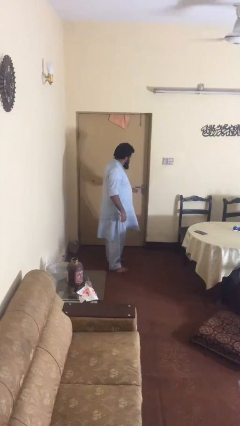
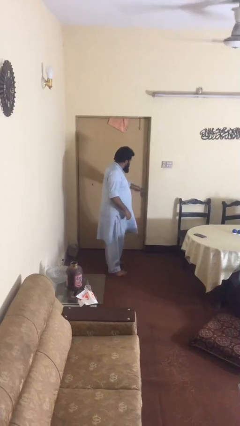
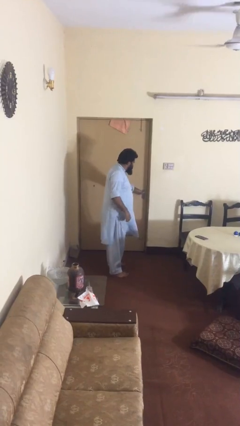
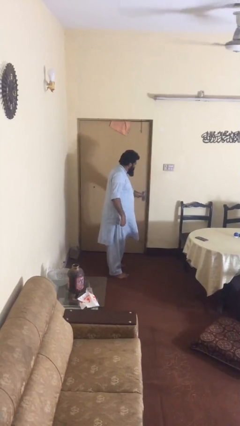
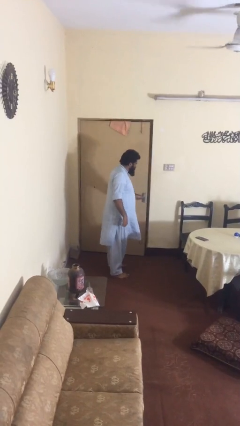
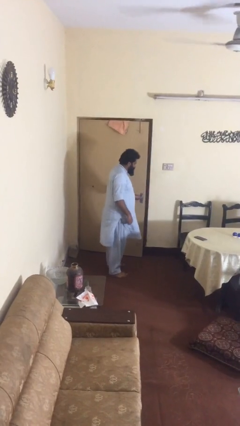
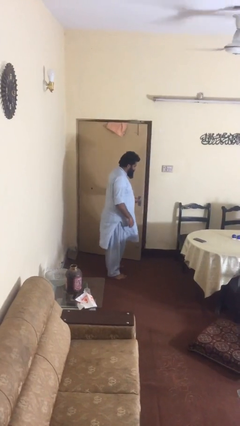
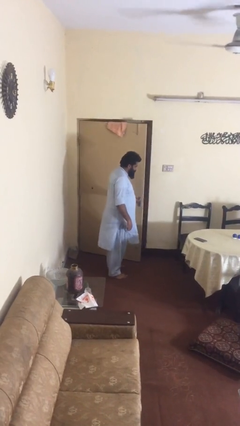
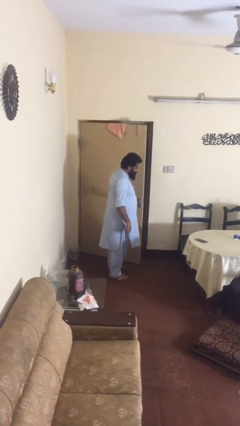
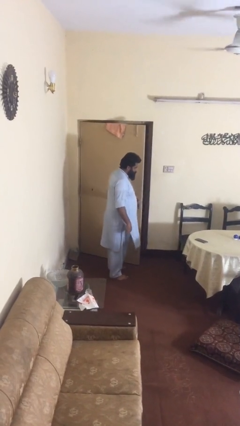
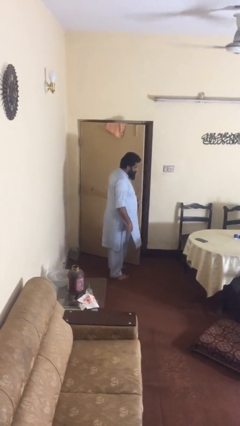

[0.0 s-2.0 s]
person opens facility door

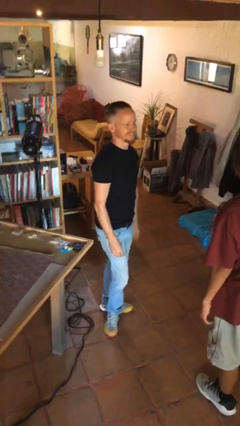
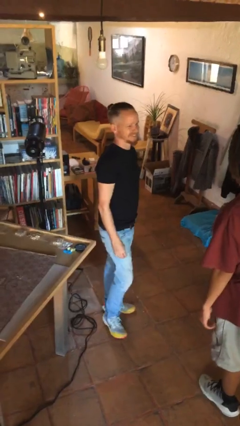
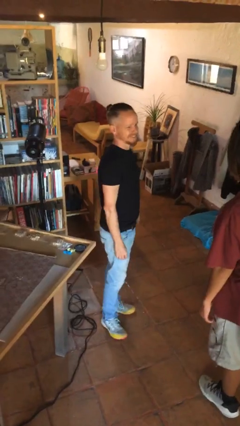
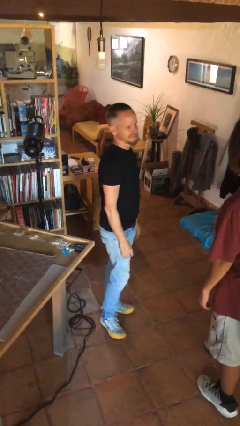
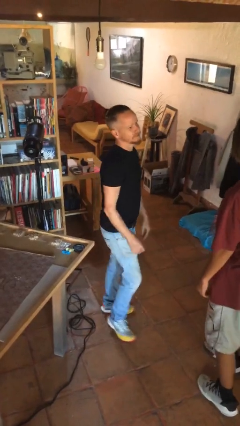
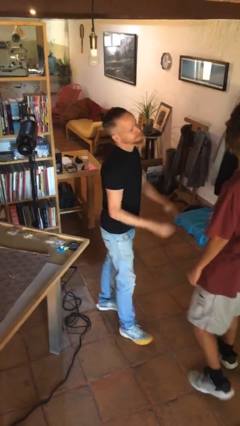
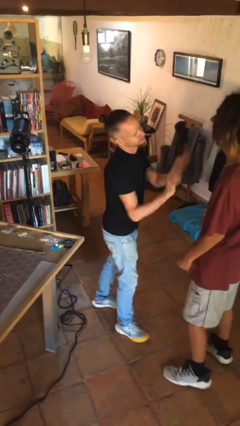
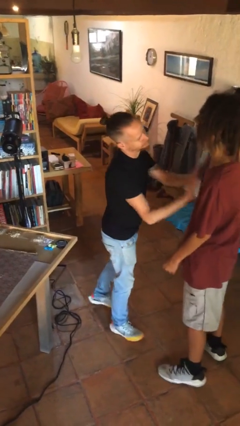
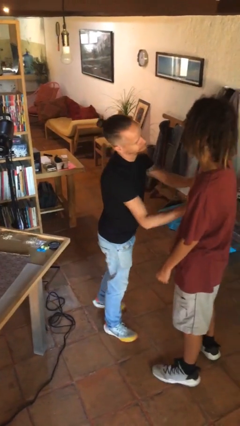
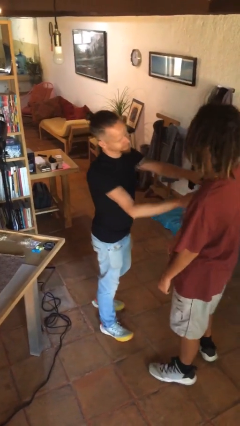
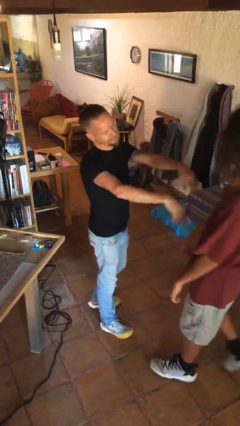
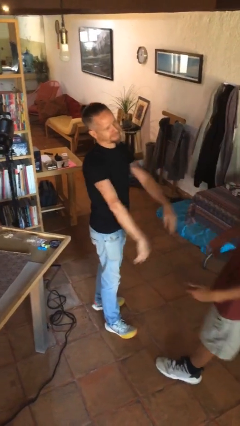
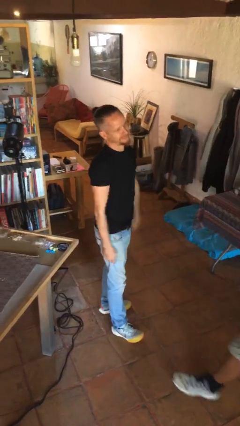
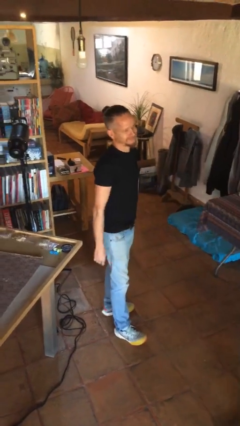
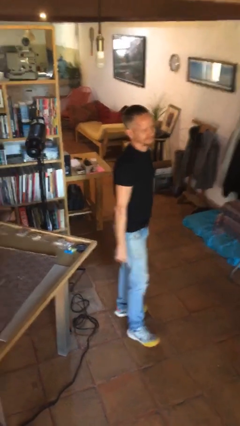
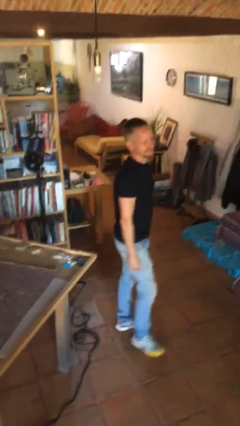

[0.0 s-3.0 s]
person shoves person

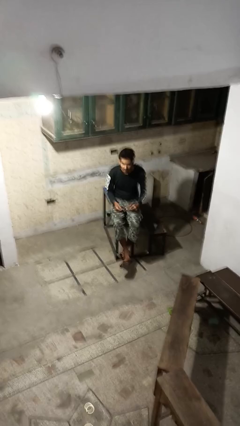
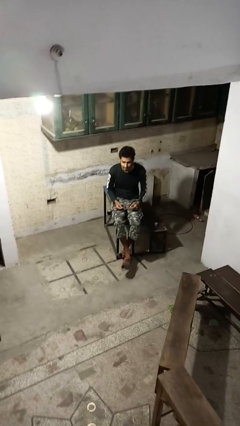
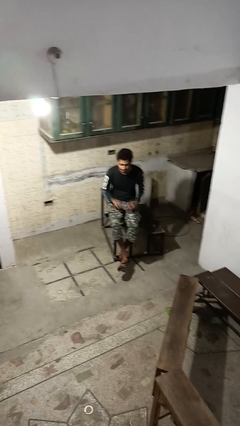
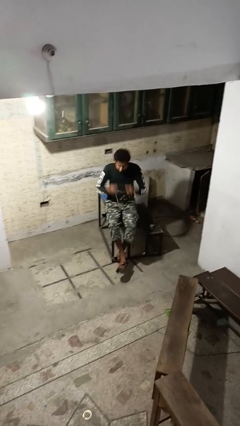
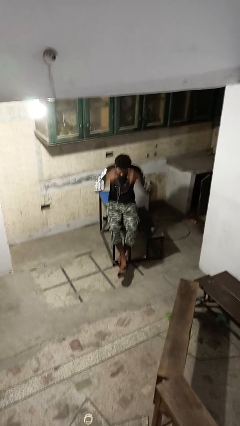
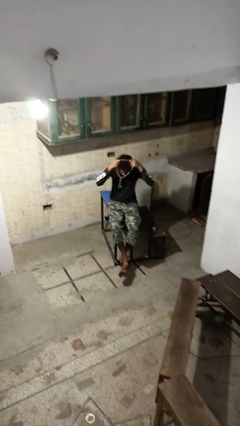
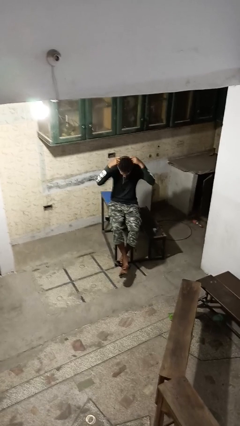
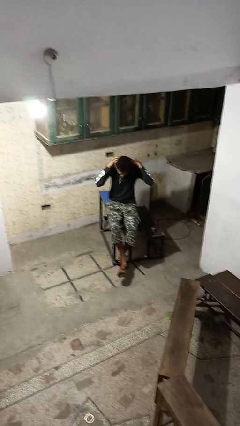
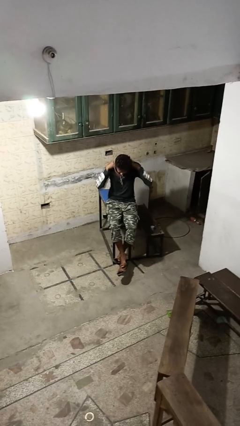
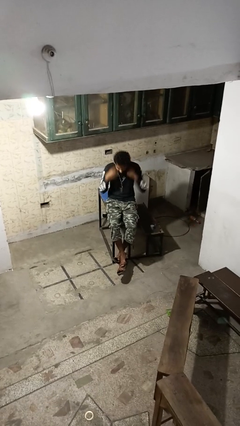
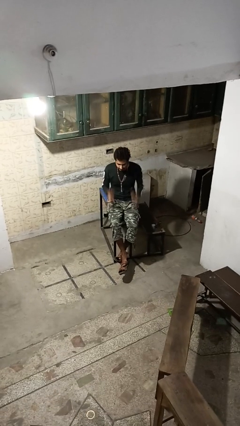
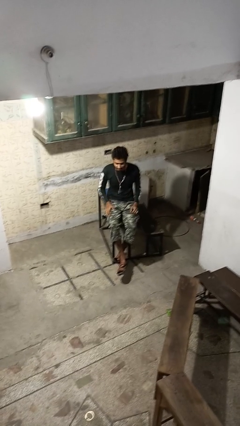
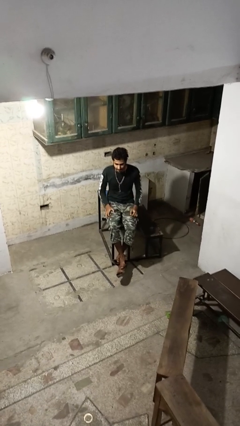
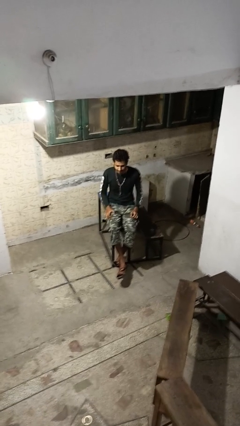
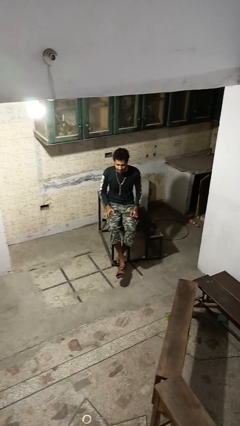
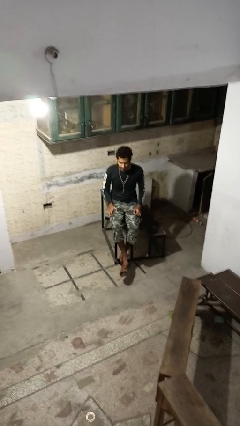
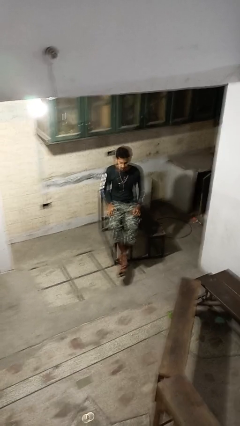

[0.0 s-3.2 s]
person puts on necklace

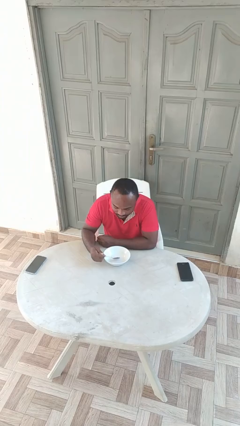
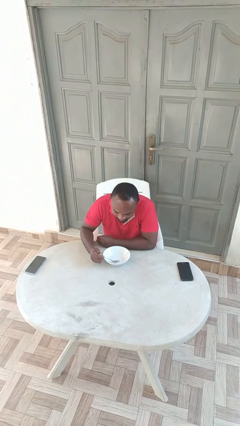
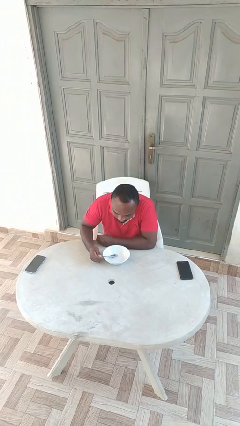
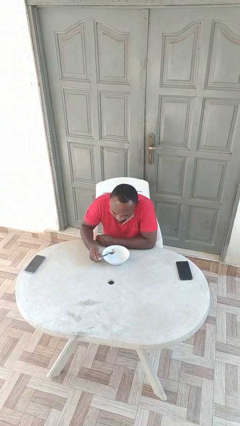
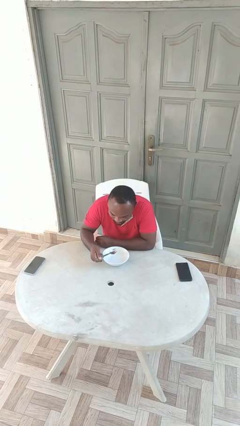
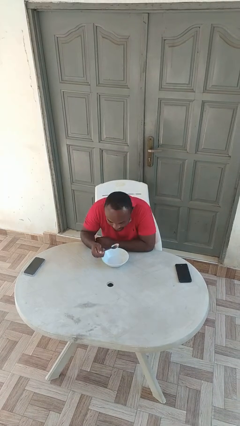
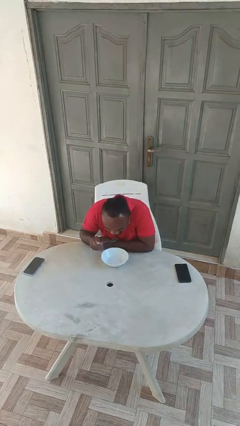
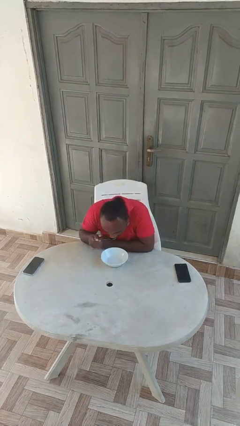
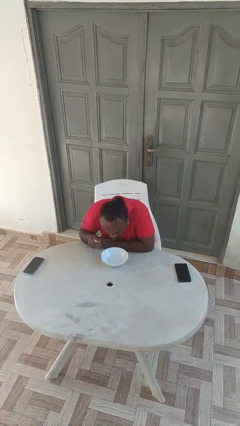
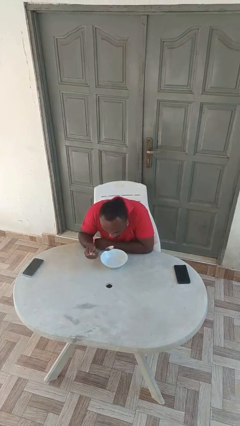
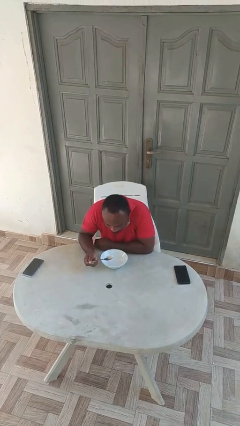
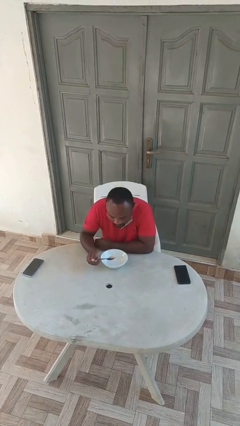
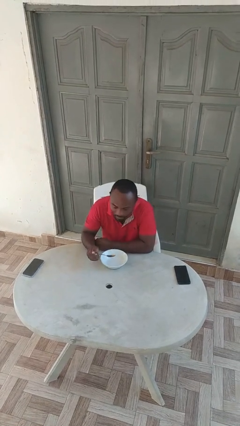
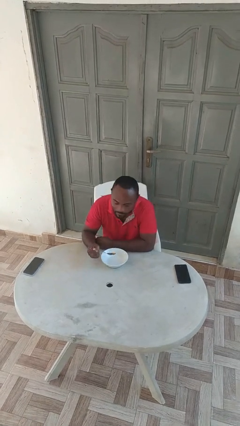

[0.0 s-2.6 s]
person eats with utensil

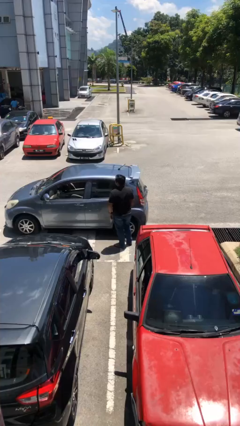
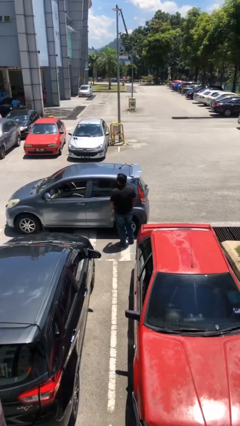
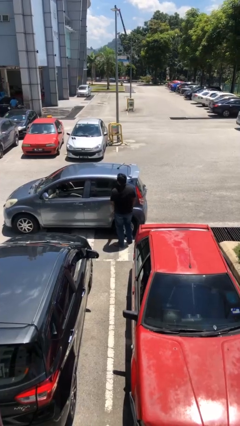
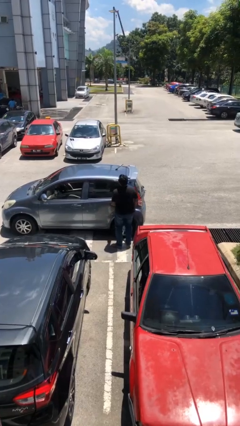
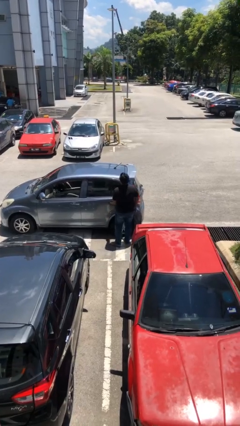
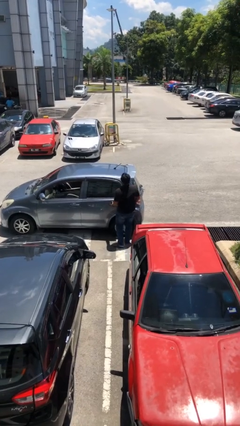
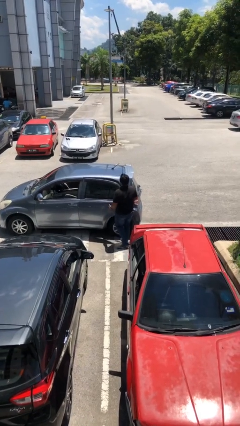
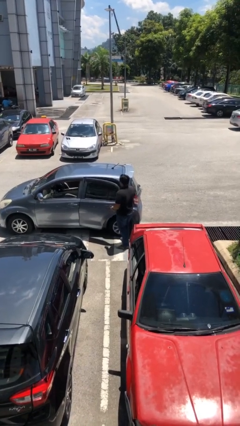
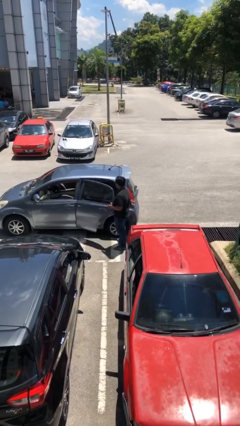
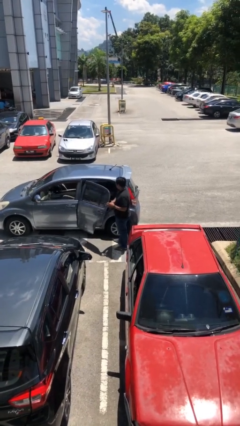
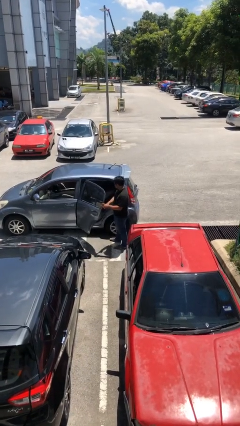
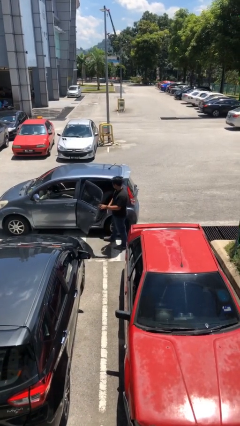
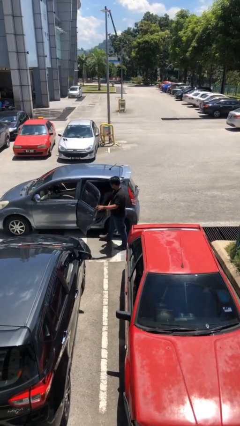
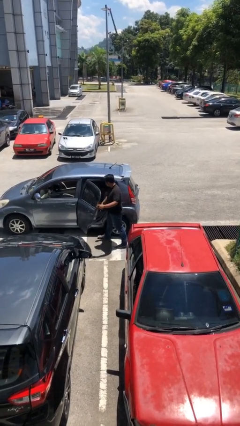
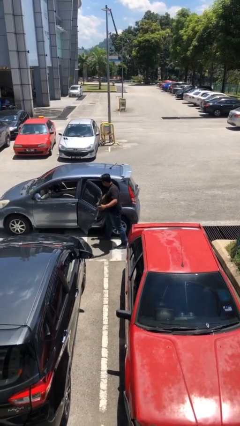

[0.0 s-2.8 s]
person opens car door

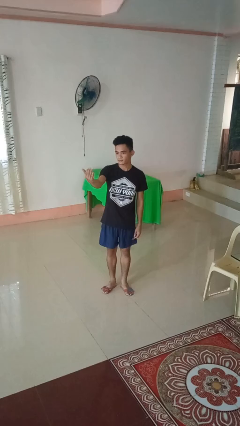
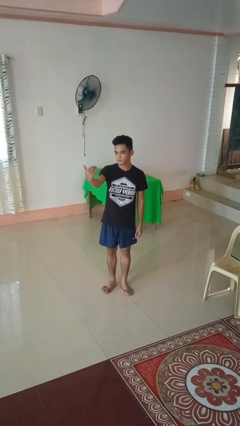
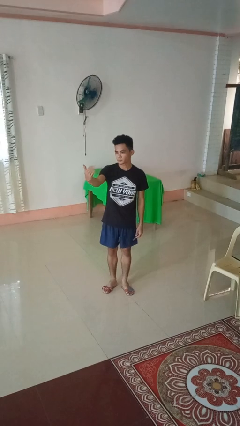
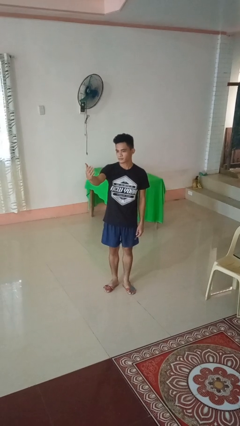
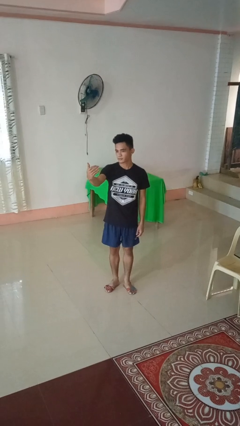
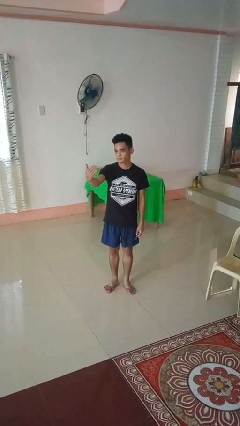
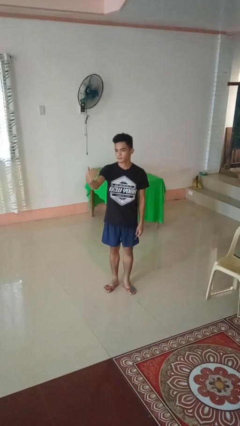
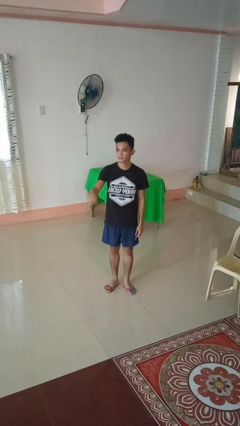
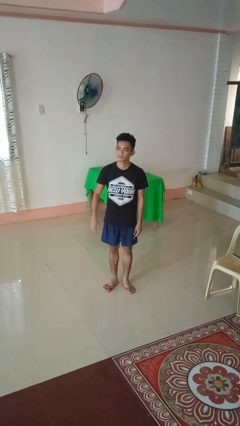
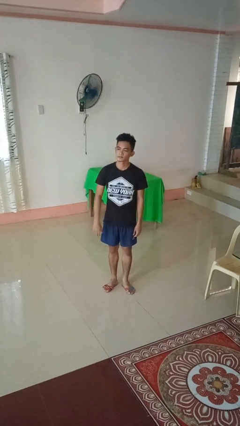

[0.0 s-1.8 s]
person gestures come here

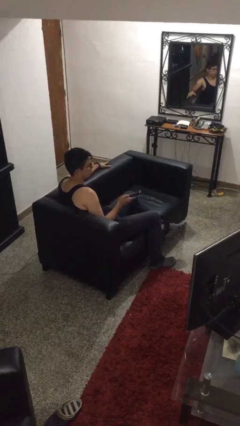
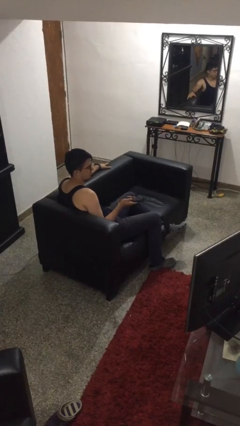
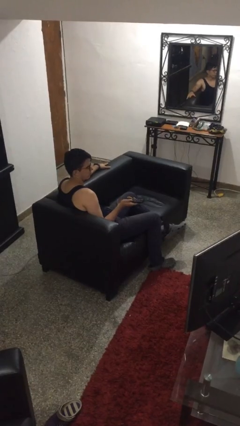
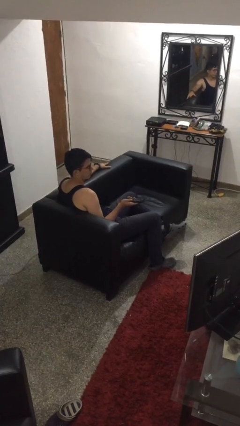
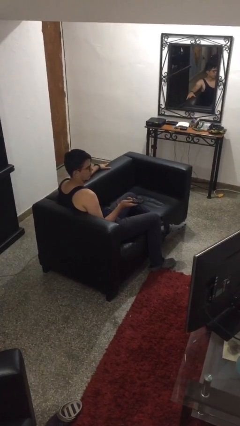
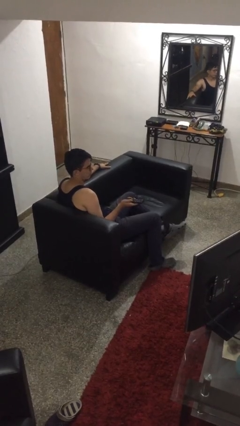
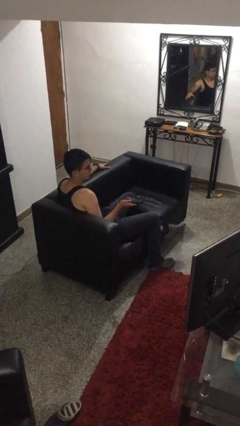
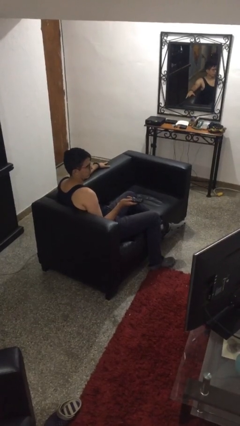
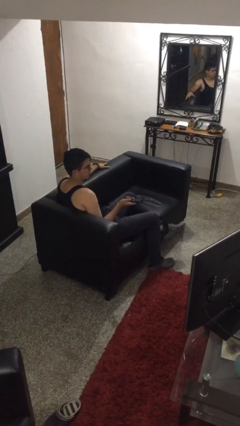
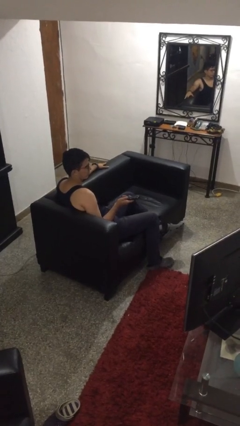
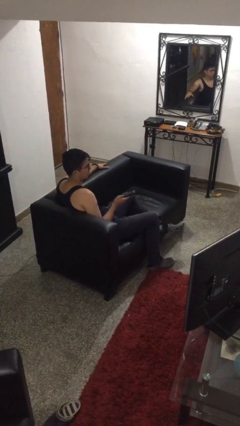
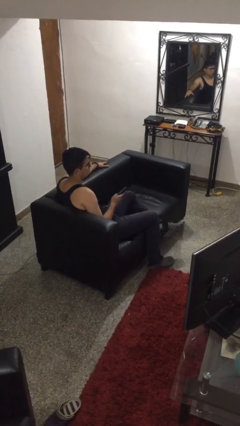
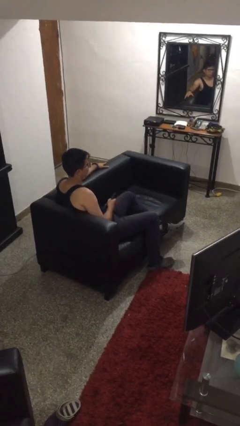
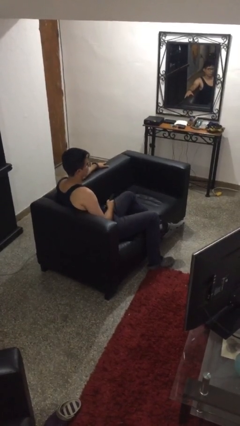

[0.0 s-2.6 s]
person uses television remote
